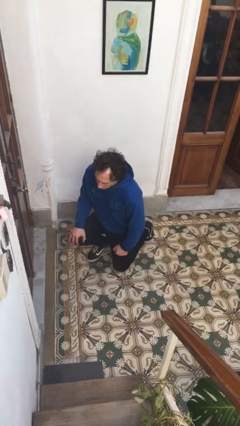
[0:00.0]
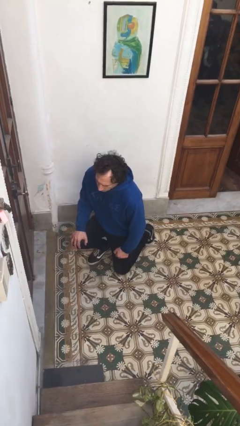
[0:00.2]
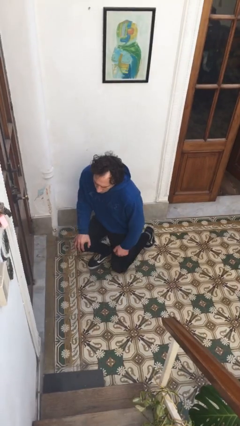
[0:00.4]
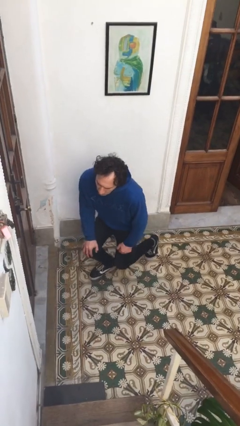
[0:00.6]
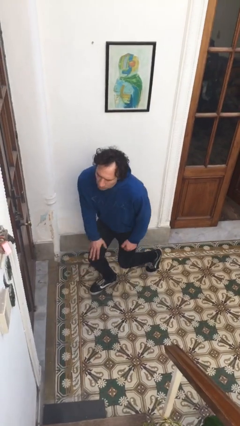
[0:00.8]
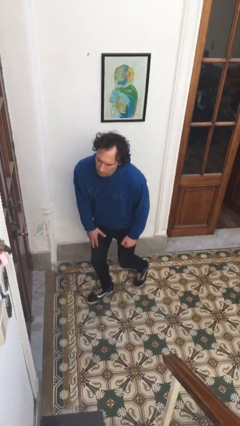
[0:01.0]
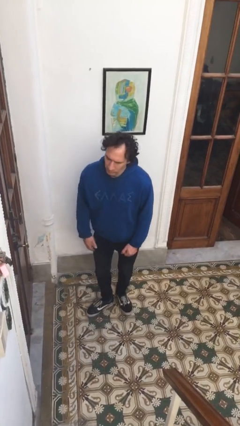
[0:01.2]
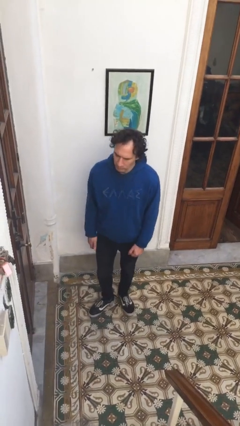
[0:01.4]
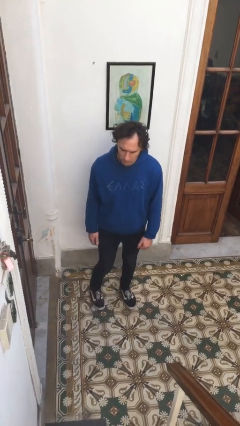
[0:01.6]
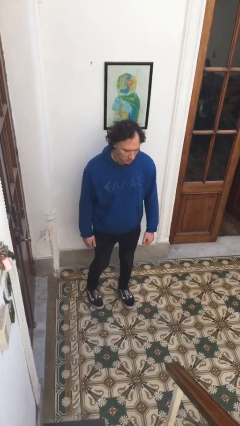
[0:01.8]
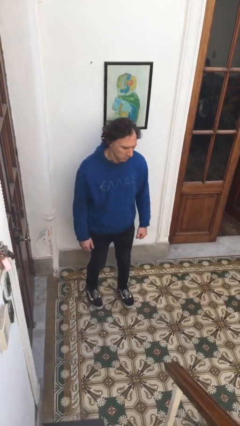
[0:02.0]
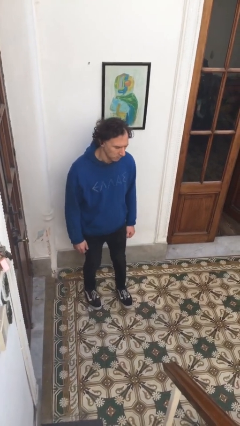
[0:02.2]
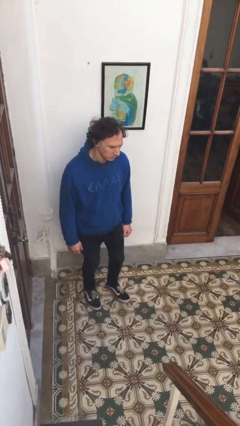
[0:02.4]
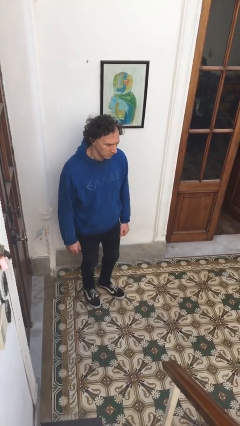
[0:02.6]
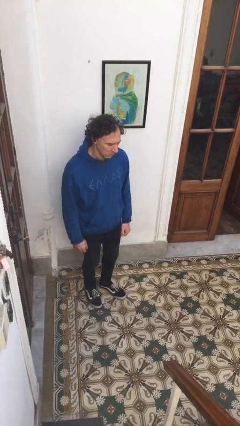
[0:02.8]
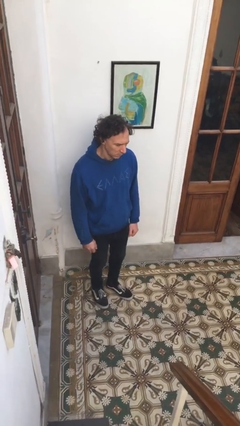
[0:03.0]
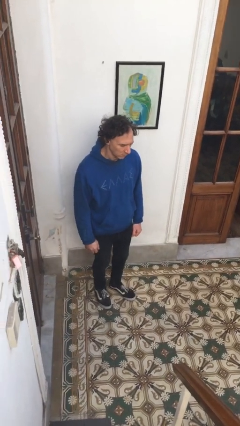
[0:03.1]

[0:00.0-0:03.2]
person stands up from floor

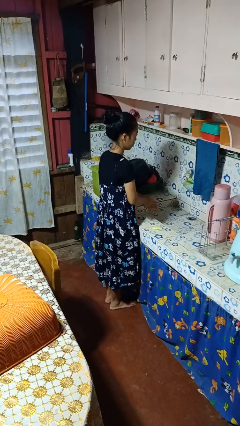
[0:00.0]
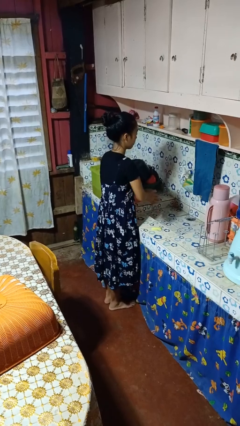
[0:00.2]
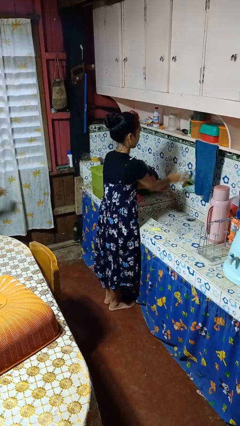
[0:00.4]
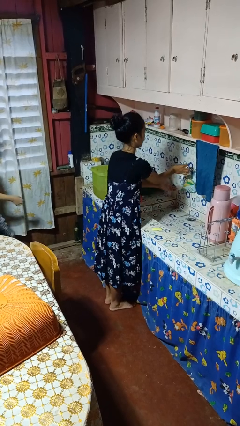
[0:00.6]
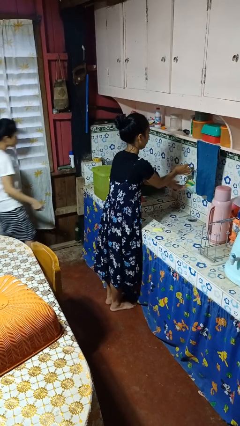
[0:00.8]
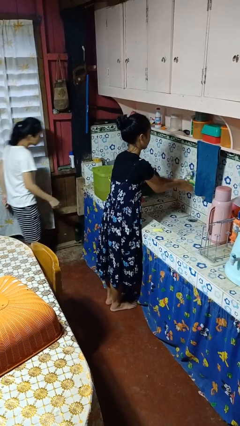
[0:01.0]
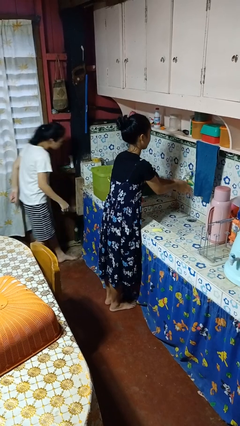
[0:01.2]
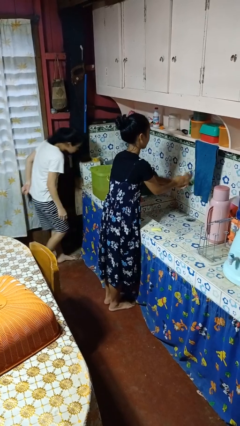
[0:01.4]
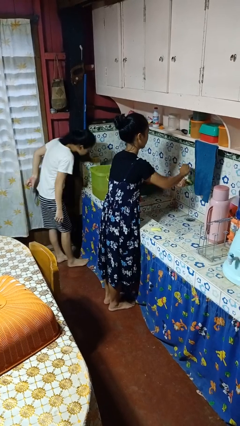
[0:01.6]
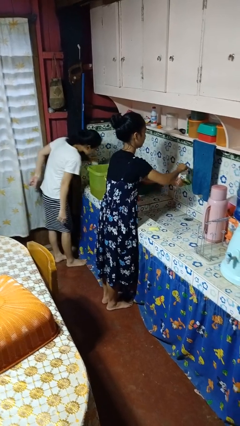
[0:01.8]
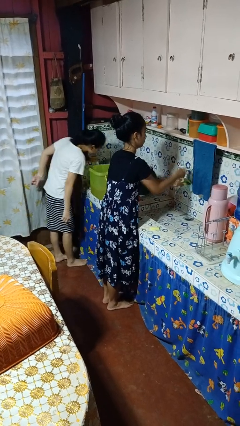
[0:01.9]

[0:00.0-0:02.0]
person washes hands

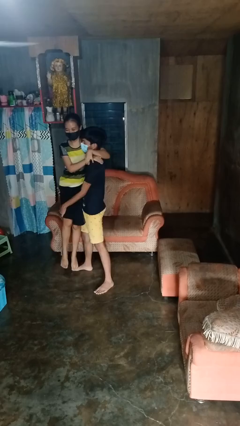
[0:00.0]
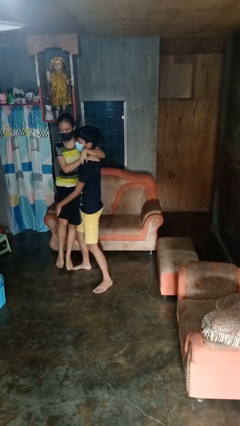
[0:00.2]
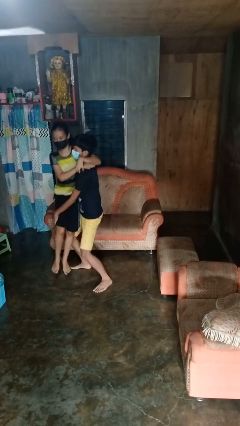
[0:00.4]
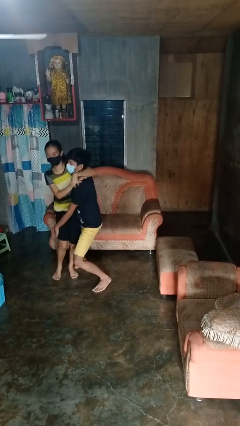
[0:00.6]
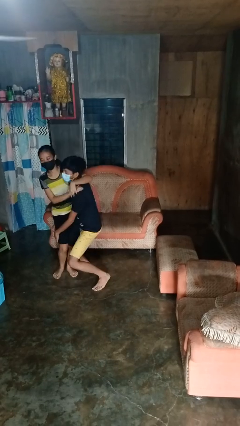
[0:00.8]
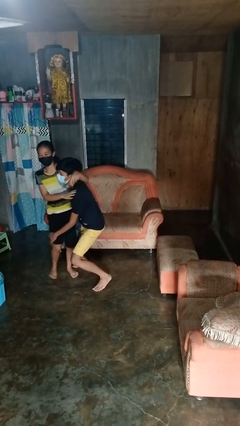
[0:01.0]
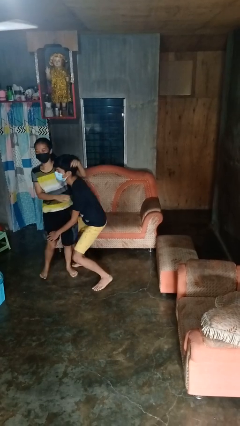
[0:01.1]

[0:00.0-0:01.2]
person puts down person

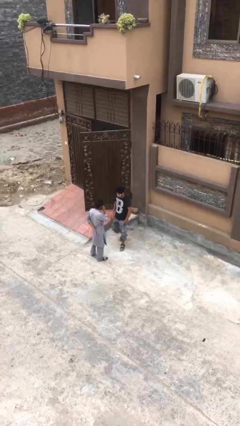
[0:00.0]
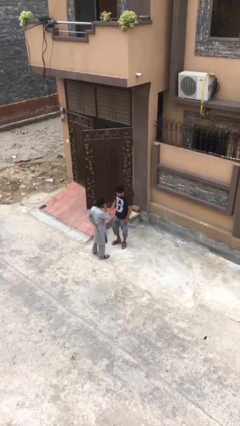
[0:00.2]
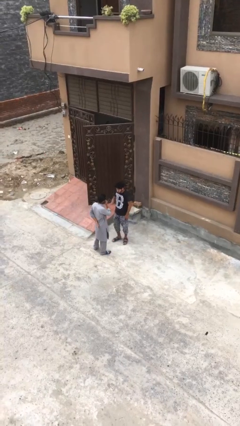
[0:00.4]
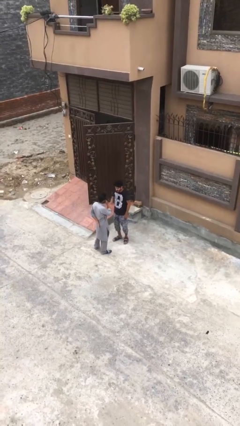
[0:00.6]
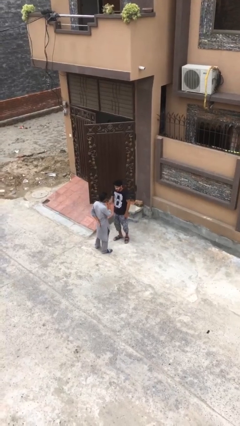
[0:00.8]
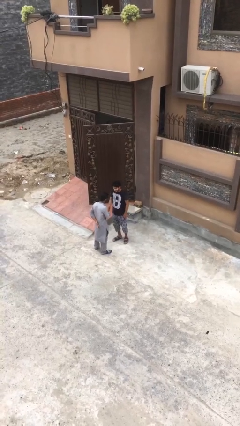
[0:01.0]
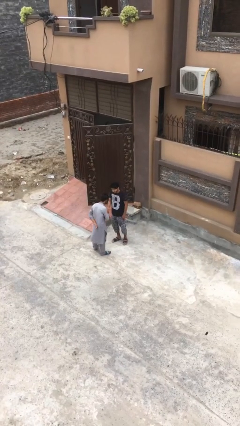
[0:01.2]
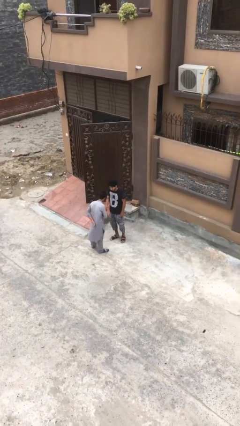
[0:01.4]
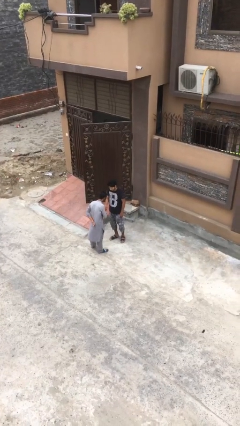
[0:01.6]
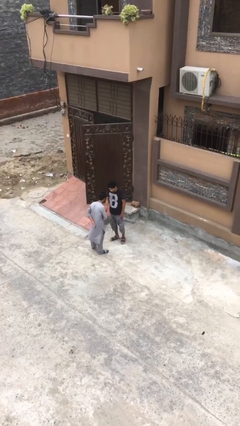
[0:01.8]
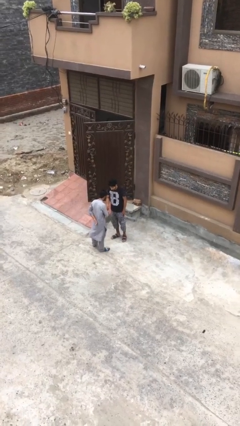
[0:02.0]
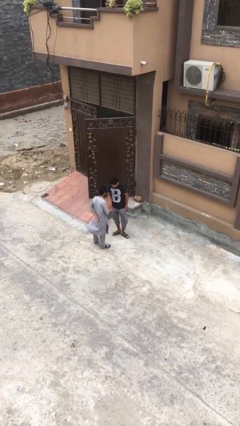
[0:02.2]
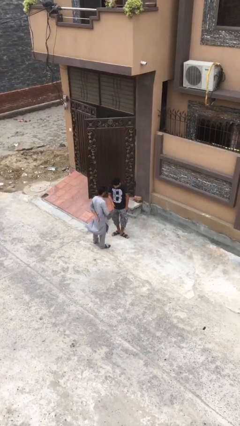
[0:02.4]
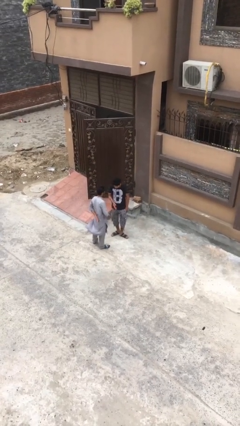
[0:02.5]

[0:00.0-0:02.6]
person shakes hand

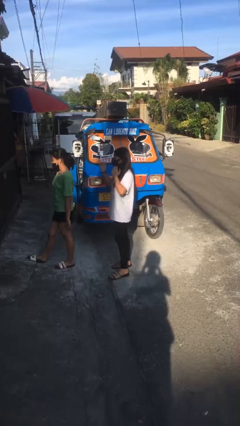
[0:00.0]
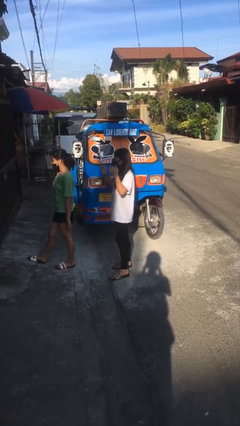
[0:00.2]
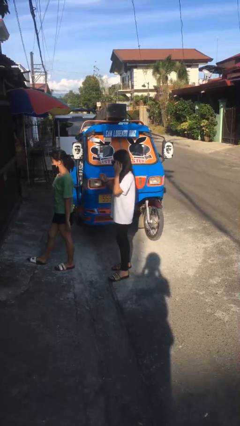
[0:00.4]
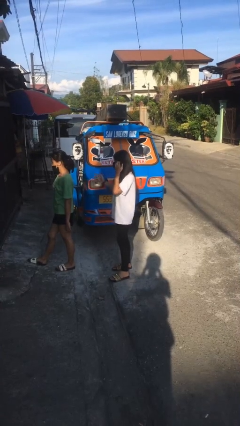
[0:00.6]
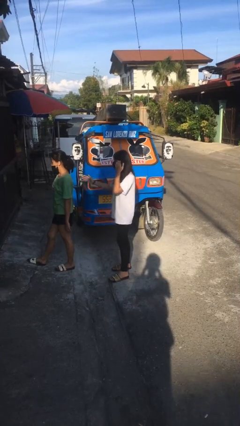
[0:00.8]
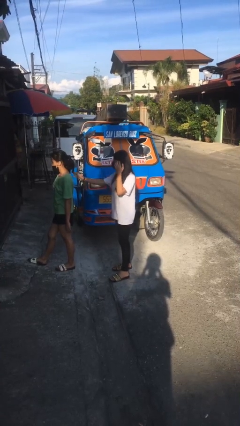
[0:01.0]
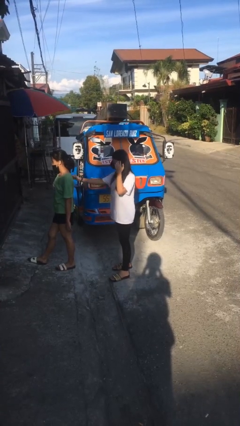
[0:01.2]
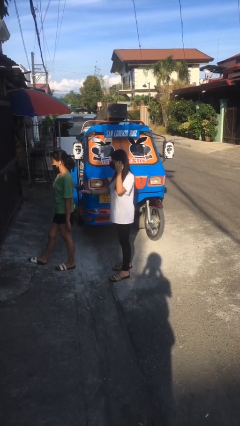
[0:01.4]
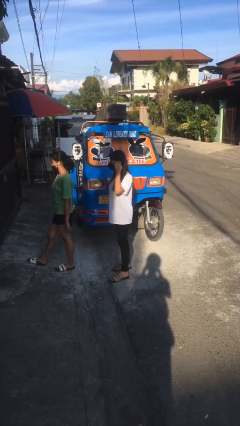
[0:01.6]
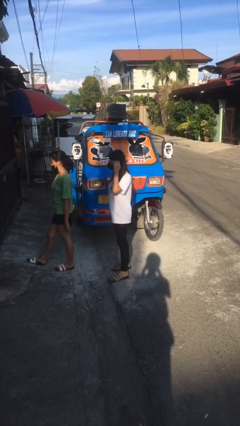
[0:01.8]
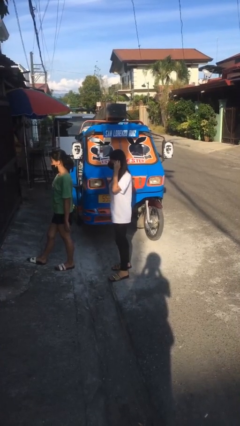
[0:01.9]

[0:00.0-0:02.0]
person touches back of person

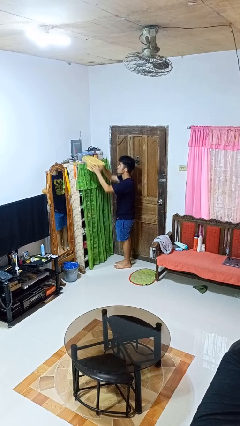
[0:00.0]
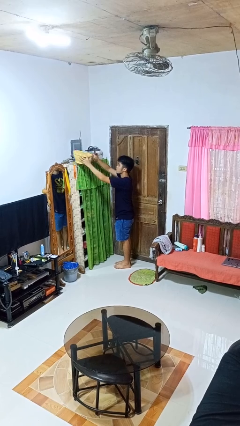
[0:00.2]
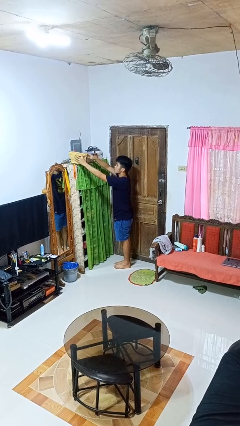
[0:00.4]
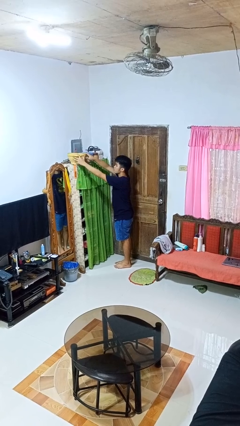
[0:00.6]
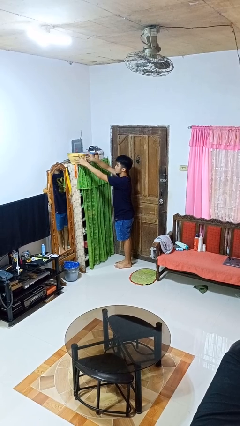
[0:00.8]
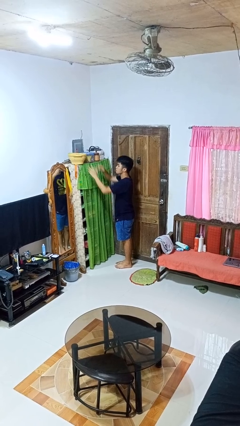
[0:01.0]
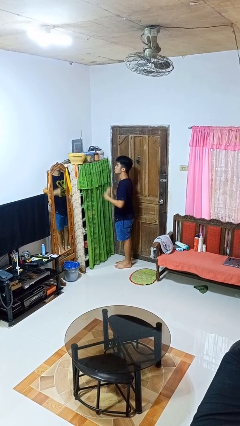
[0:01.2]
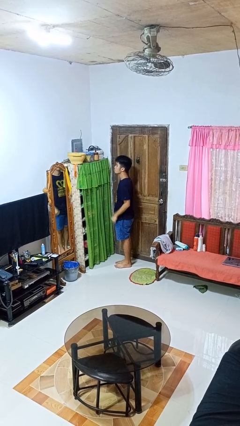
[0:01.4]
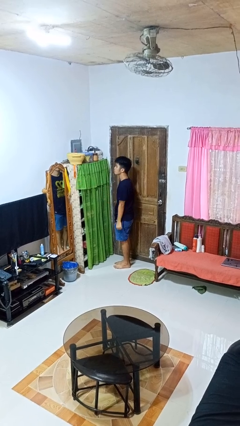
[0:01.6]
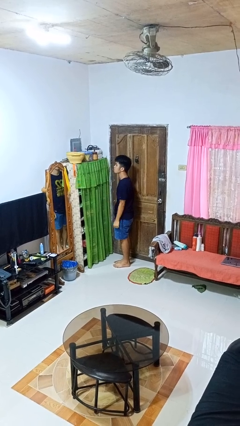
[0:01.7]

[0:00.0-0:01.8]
person puts down object on shelf

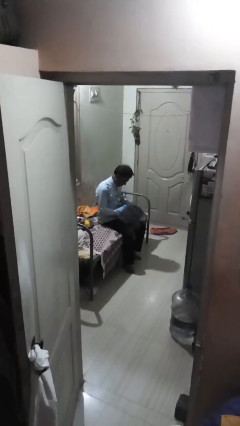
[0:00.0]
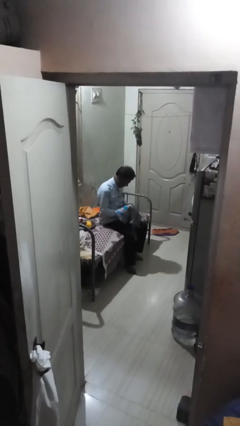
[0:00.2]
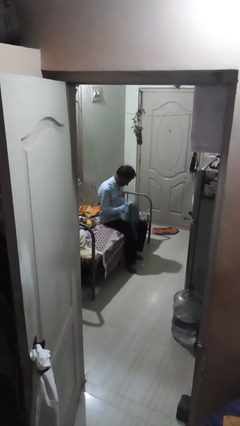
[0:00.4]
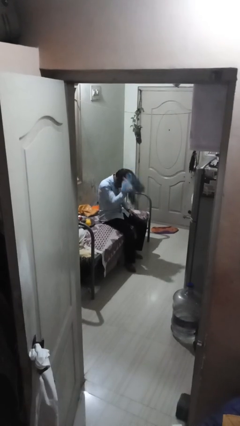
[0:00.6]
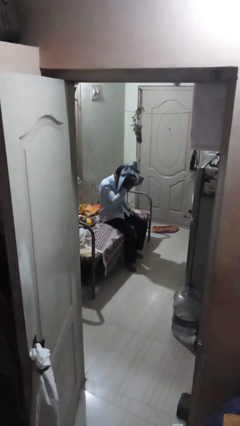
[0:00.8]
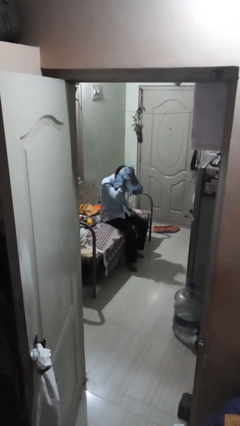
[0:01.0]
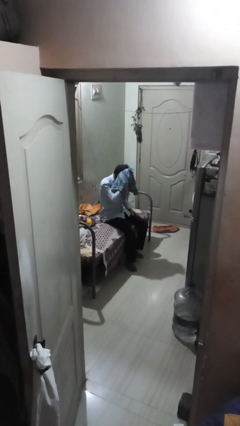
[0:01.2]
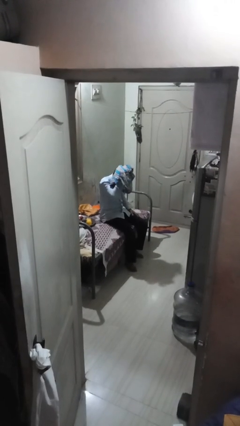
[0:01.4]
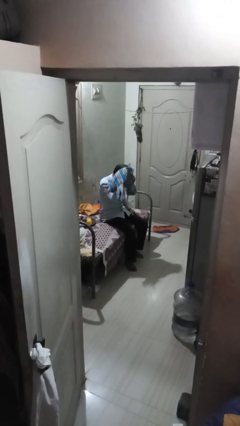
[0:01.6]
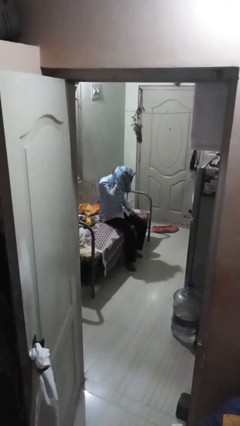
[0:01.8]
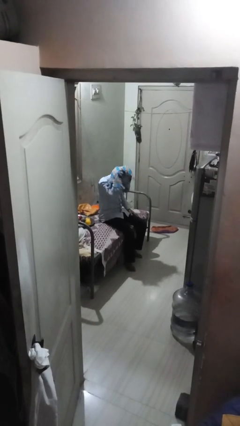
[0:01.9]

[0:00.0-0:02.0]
person dries hair with towel

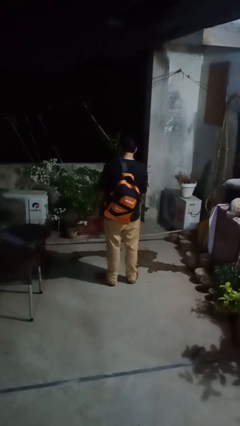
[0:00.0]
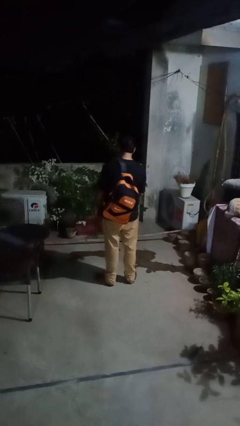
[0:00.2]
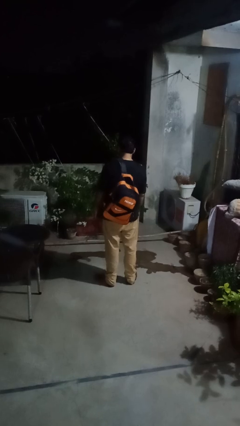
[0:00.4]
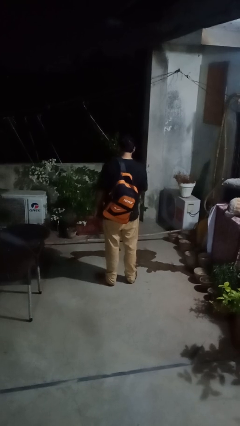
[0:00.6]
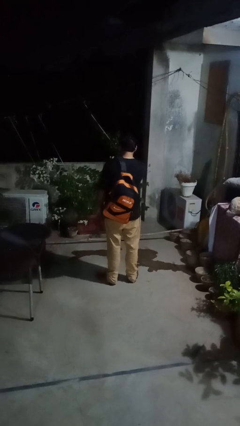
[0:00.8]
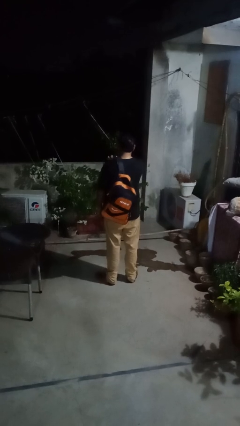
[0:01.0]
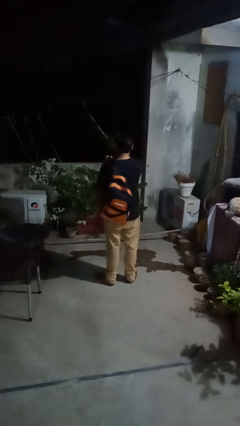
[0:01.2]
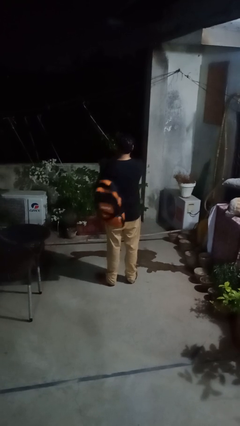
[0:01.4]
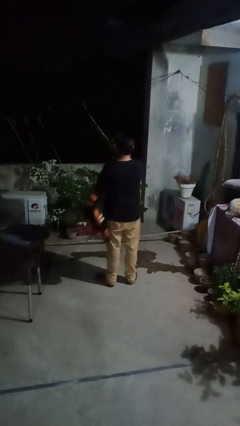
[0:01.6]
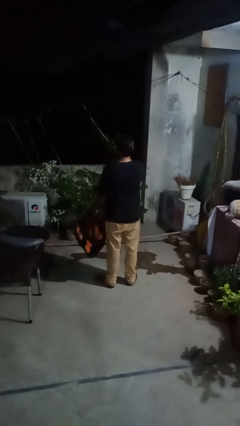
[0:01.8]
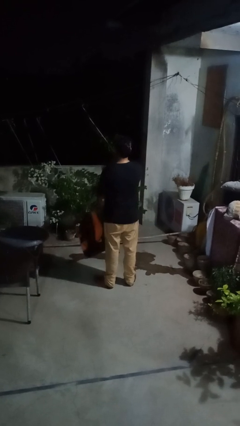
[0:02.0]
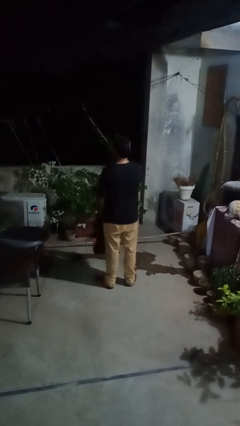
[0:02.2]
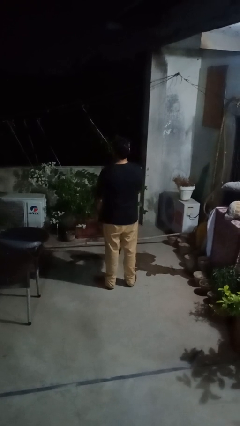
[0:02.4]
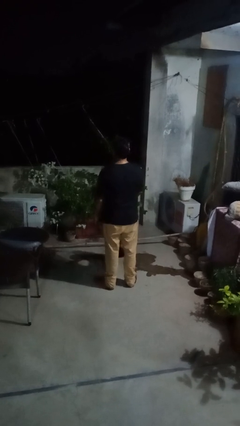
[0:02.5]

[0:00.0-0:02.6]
person takes off backpack
